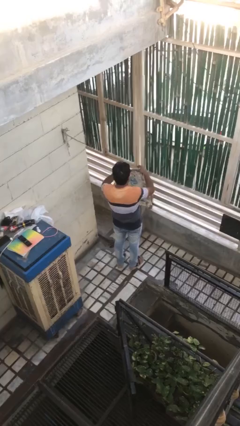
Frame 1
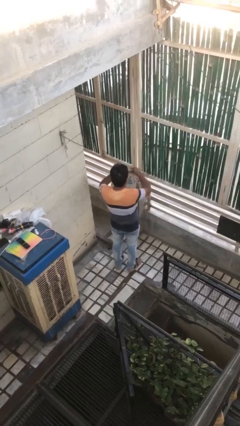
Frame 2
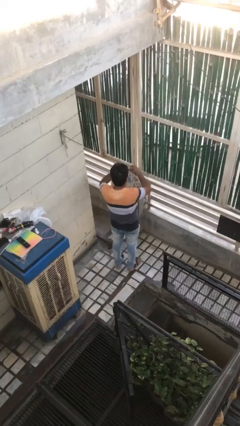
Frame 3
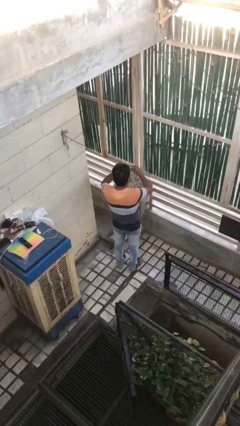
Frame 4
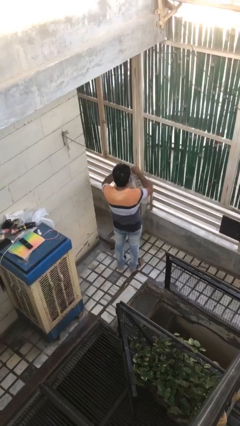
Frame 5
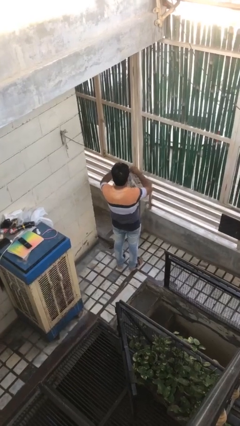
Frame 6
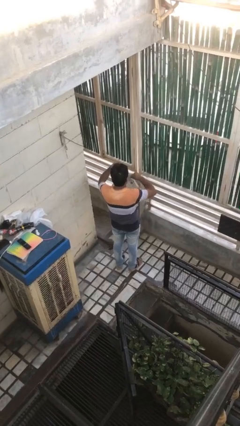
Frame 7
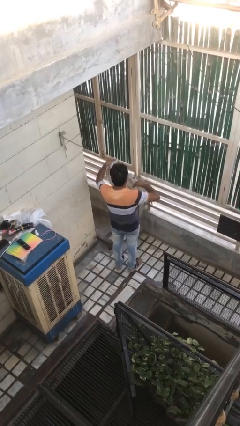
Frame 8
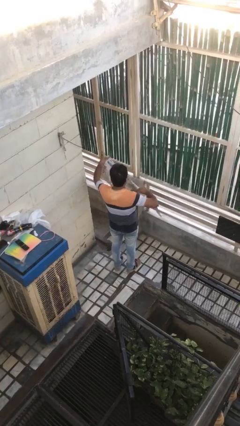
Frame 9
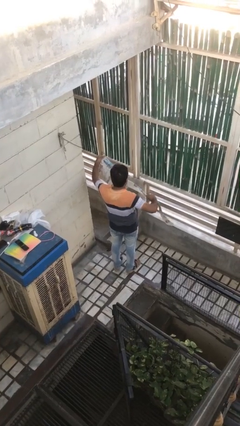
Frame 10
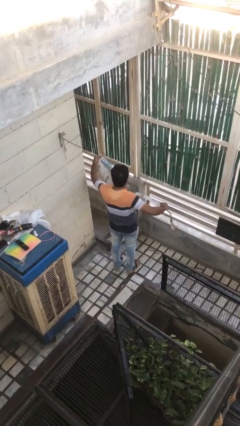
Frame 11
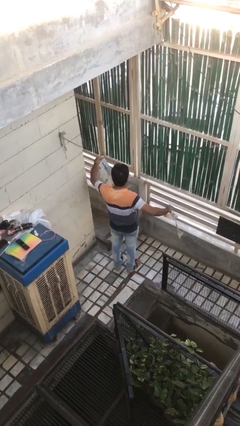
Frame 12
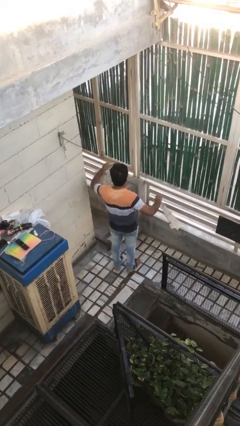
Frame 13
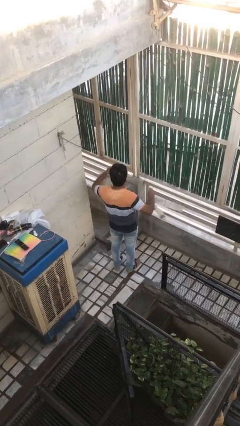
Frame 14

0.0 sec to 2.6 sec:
person tears paper

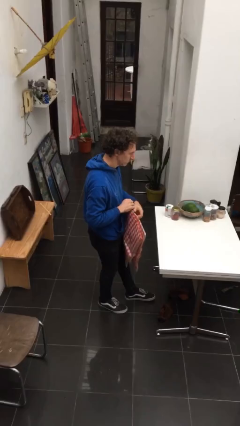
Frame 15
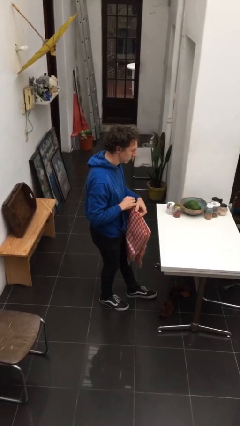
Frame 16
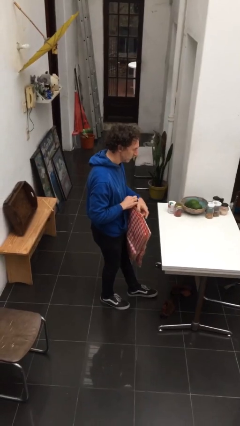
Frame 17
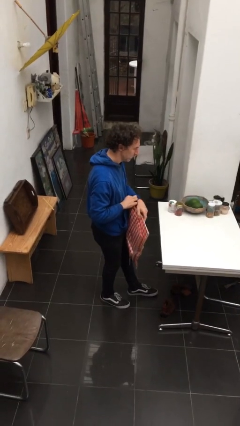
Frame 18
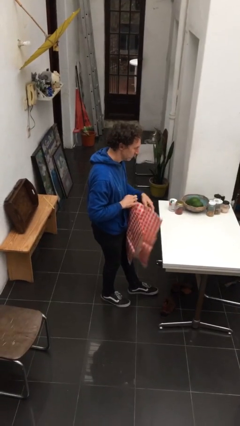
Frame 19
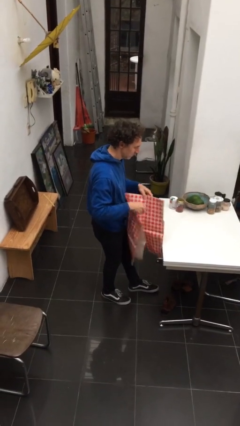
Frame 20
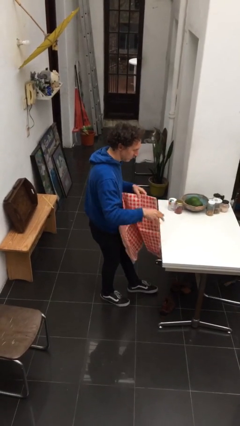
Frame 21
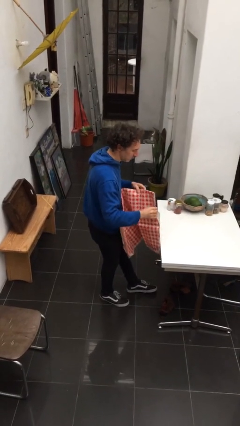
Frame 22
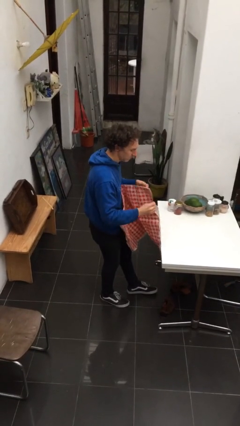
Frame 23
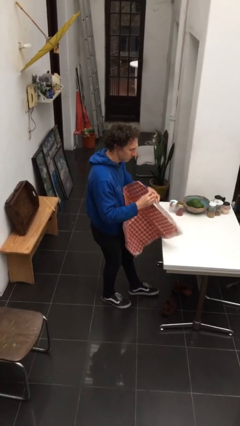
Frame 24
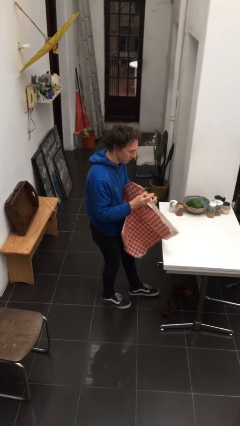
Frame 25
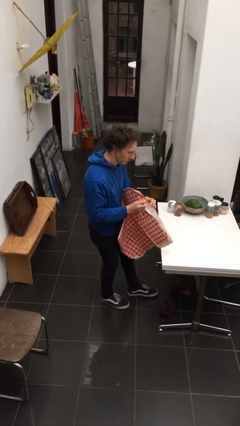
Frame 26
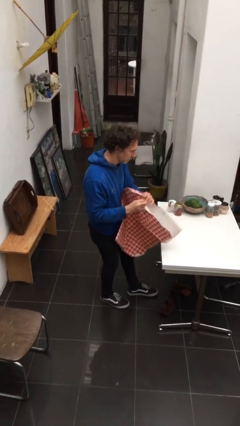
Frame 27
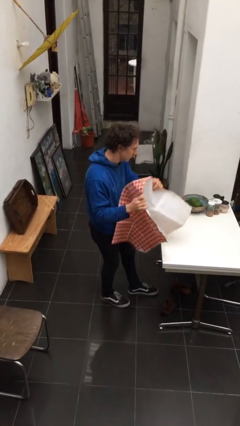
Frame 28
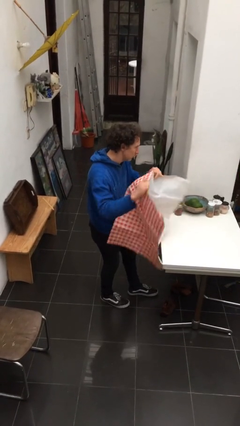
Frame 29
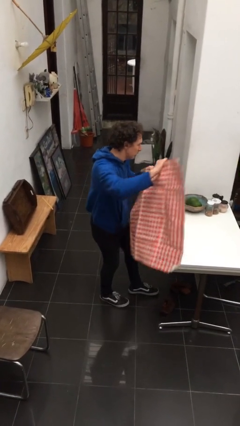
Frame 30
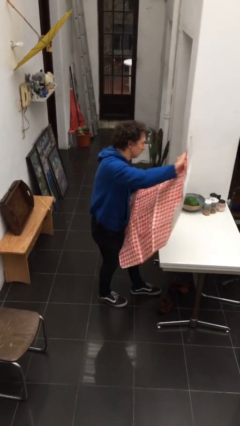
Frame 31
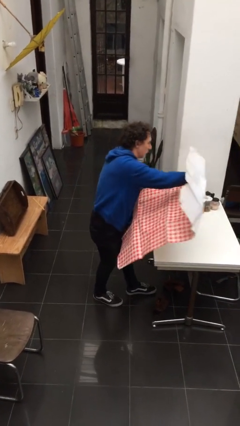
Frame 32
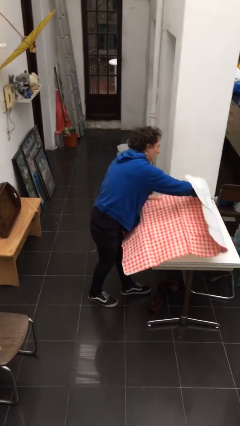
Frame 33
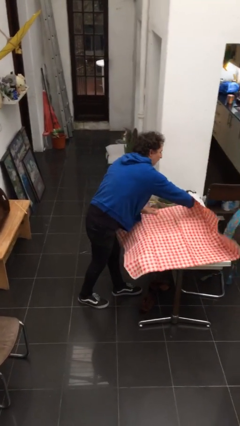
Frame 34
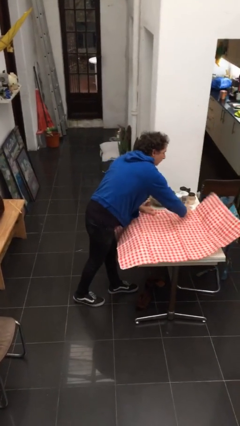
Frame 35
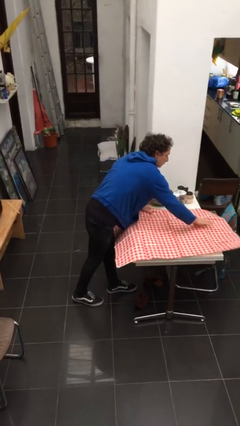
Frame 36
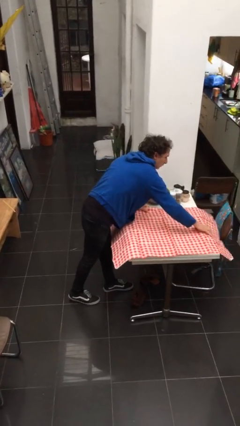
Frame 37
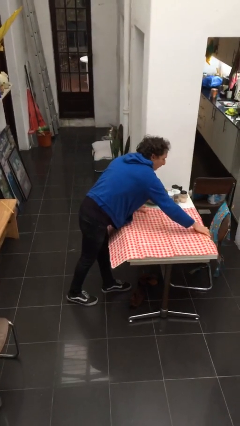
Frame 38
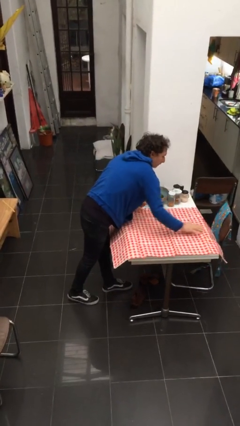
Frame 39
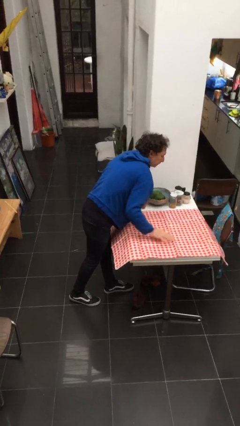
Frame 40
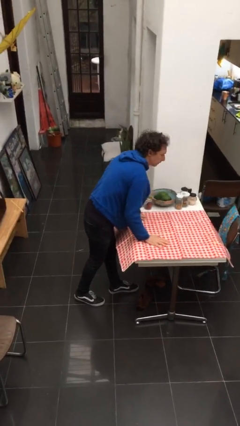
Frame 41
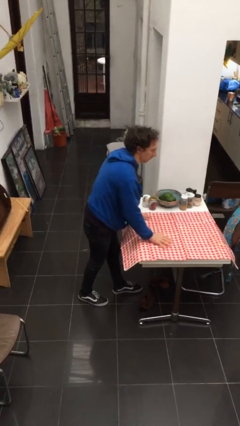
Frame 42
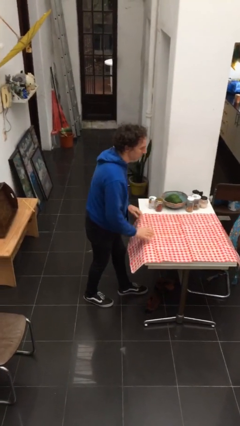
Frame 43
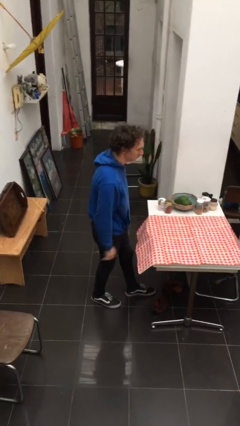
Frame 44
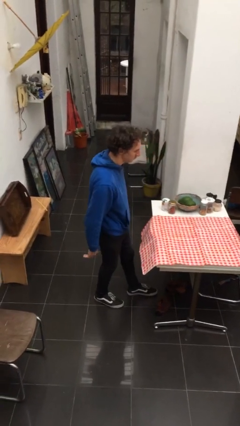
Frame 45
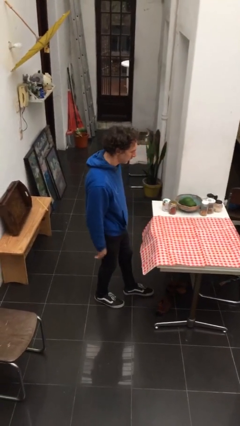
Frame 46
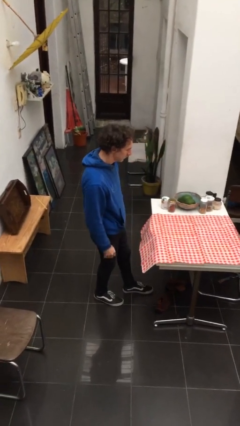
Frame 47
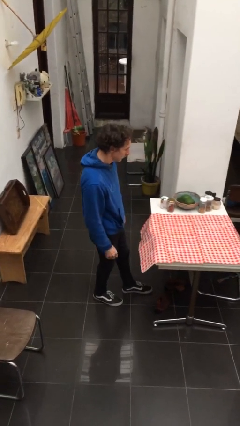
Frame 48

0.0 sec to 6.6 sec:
person spreads tablecloth

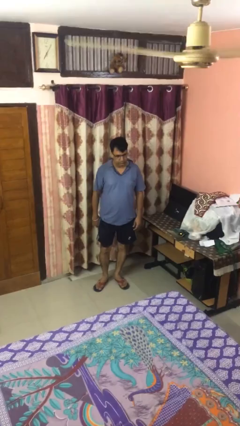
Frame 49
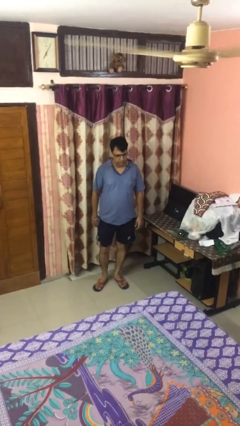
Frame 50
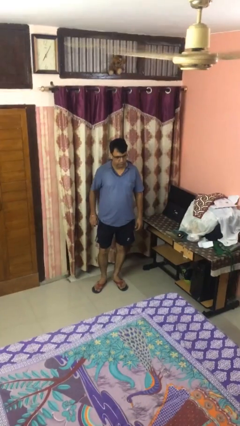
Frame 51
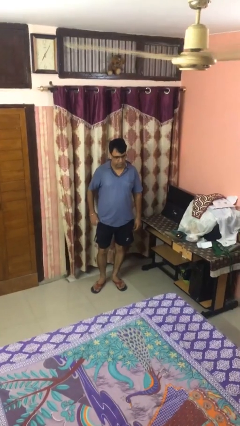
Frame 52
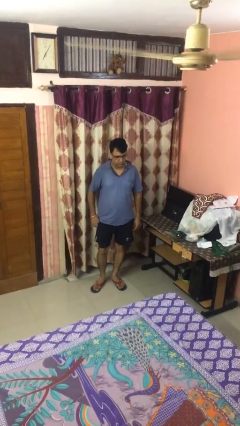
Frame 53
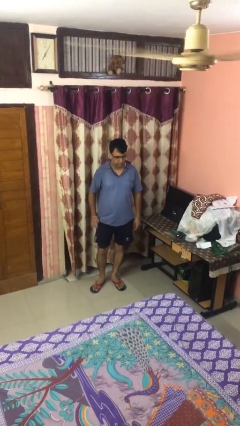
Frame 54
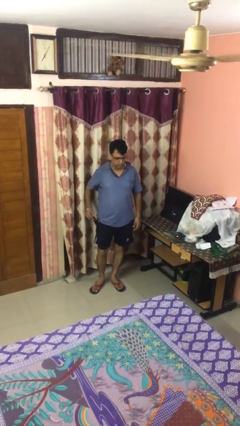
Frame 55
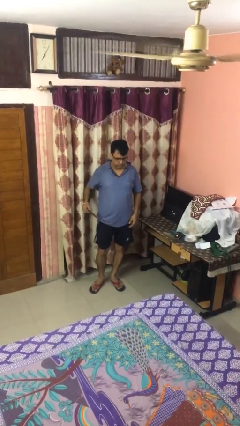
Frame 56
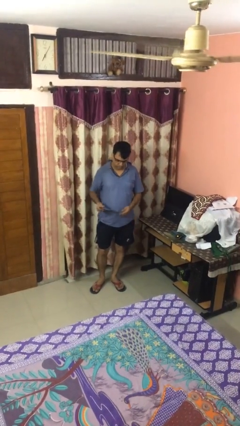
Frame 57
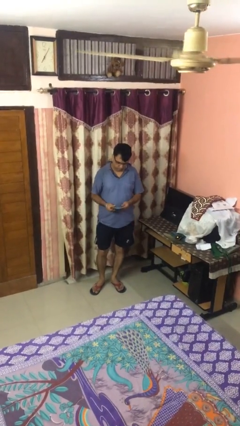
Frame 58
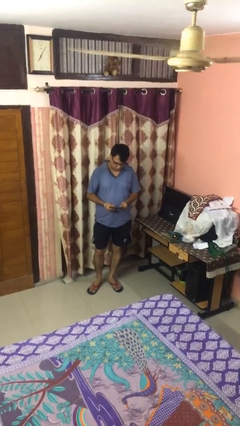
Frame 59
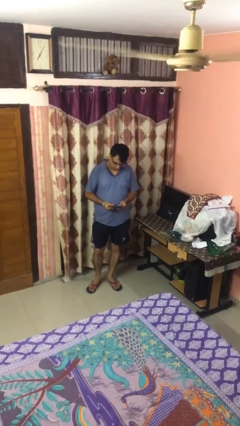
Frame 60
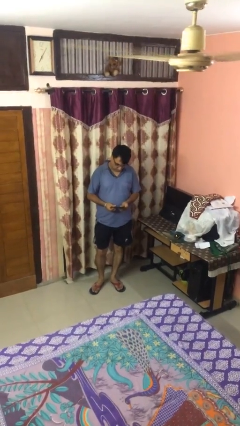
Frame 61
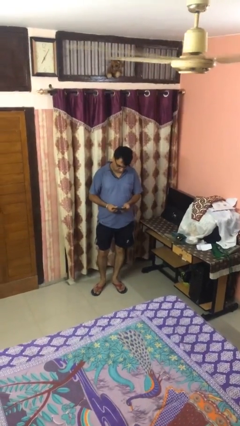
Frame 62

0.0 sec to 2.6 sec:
person takes phone from pocket

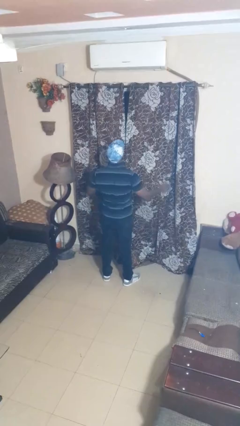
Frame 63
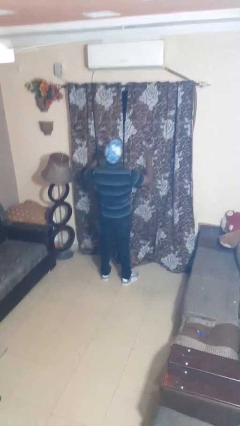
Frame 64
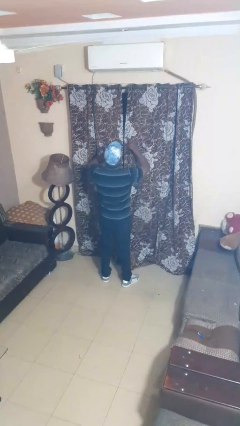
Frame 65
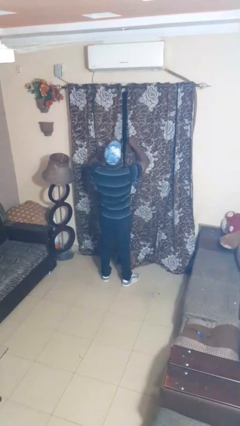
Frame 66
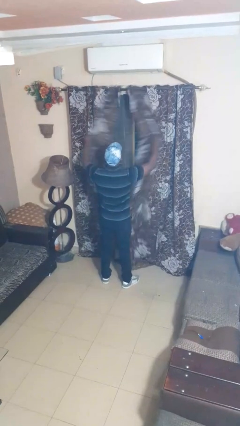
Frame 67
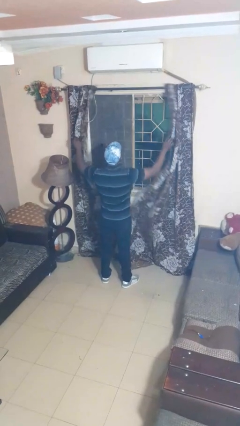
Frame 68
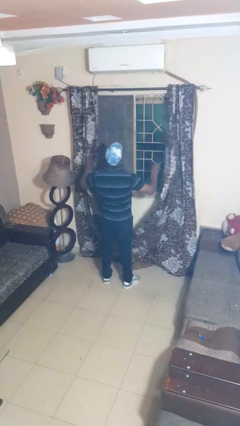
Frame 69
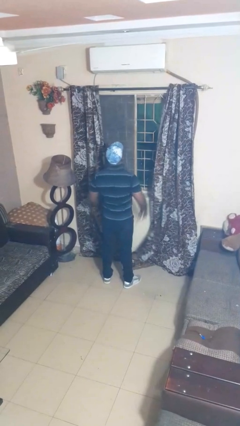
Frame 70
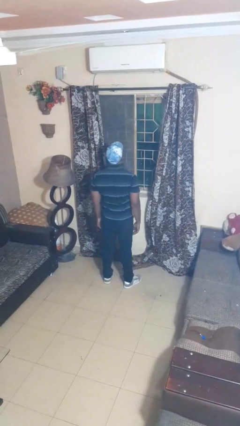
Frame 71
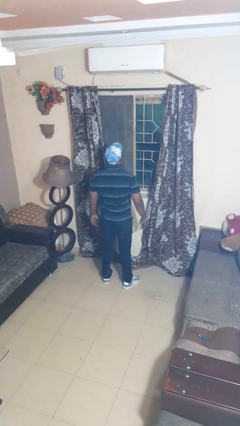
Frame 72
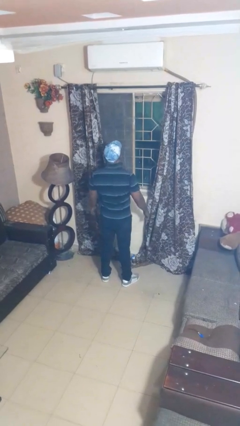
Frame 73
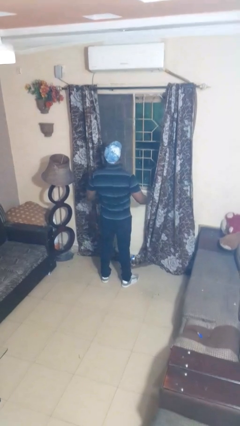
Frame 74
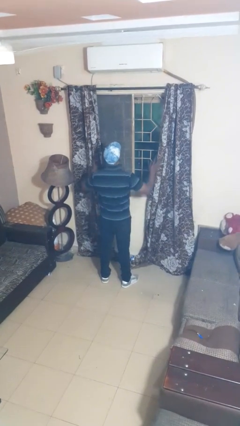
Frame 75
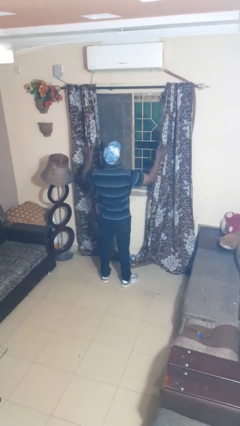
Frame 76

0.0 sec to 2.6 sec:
person opens curtains

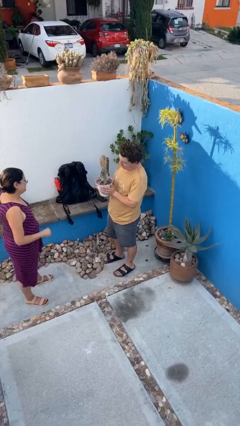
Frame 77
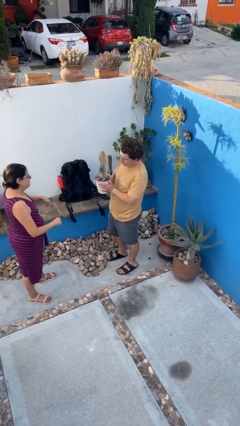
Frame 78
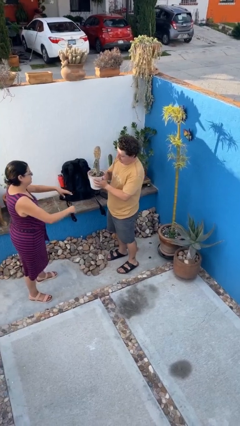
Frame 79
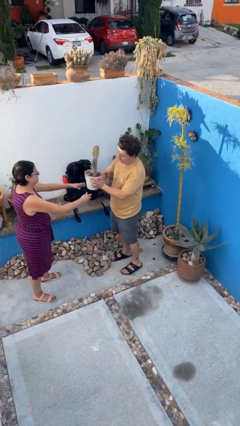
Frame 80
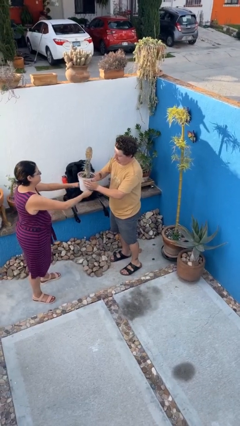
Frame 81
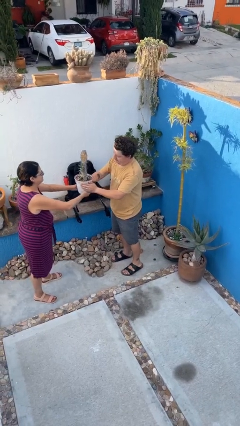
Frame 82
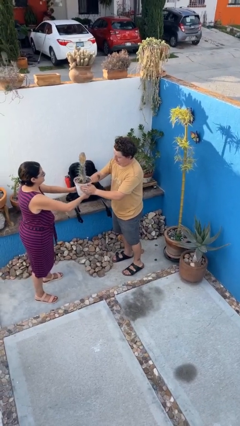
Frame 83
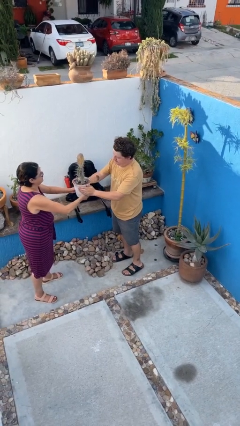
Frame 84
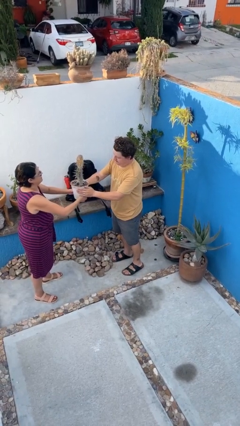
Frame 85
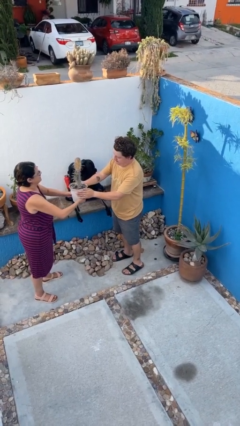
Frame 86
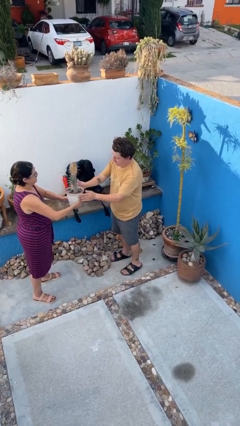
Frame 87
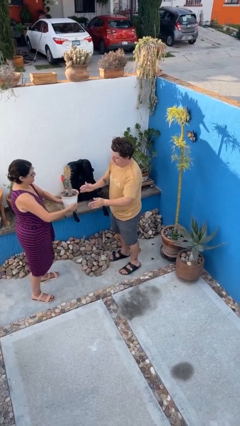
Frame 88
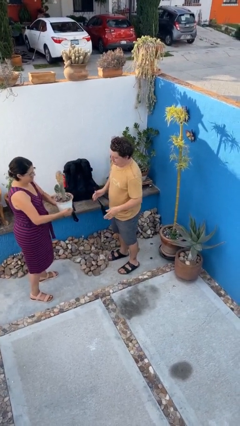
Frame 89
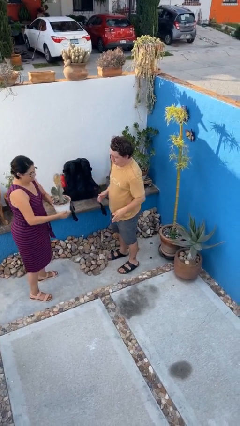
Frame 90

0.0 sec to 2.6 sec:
person transfers object to person

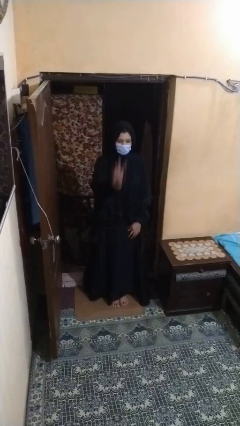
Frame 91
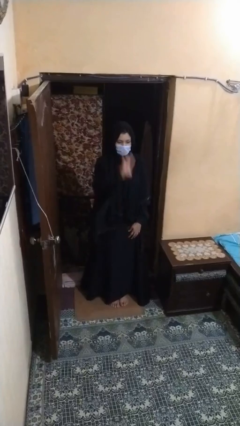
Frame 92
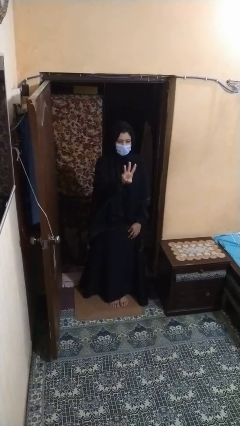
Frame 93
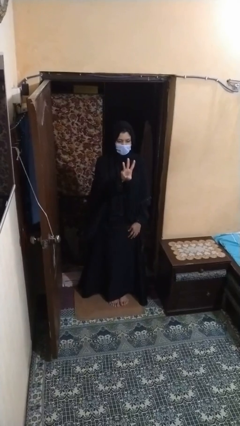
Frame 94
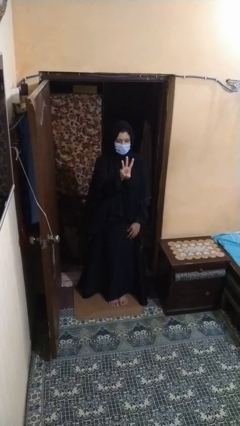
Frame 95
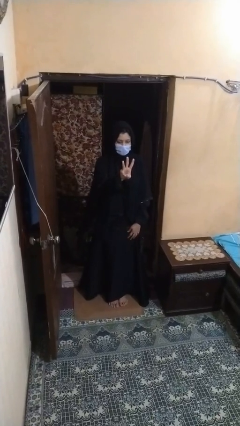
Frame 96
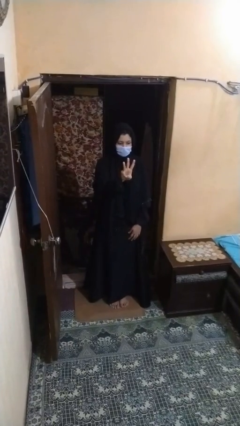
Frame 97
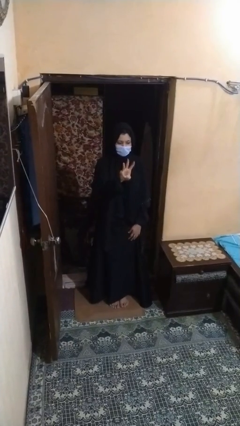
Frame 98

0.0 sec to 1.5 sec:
person gestures number three
